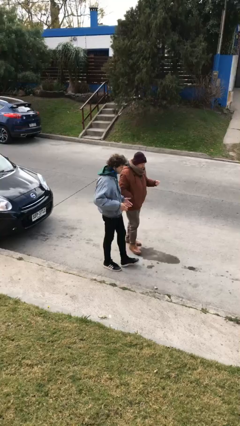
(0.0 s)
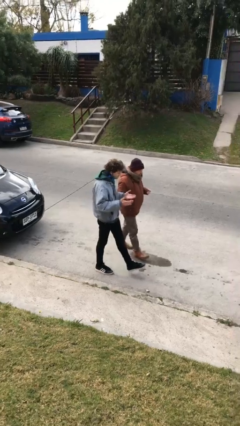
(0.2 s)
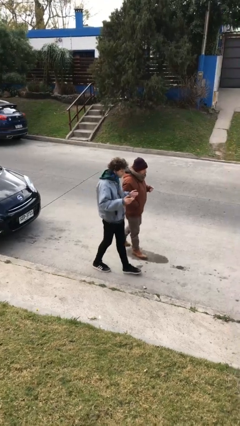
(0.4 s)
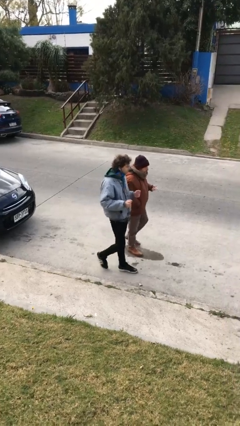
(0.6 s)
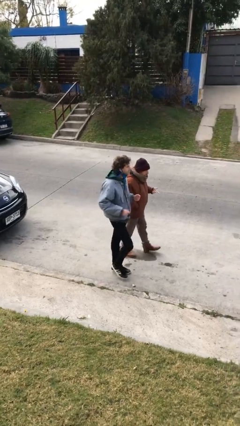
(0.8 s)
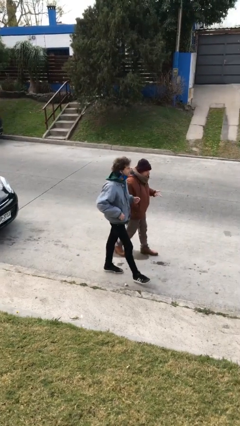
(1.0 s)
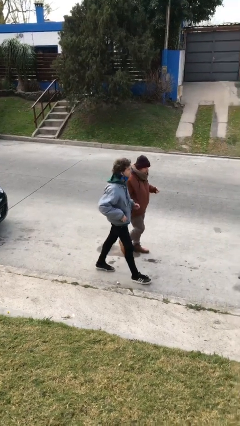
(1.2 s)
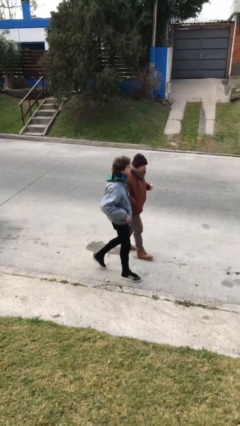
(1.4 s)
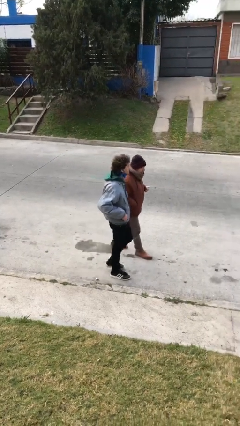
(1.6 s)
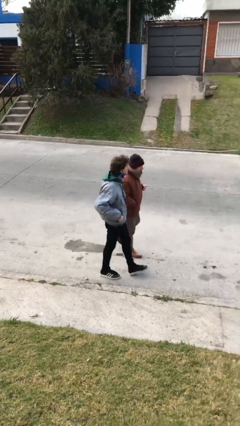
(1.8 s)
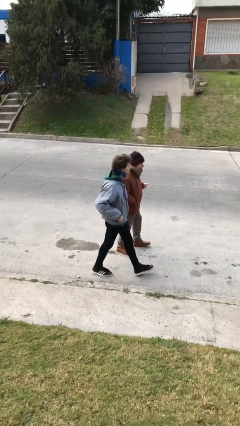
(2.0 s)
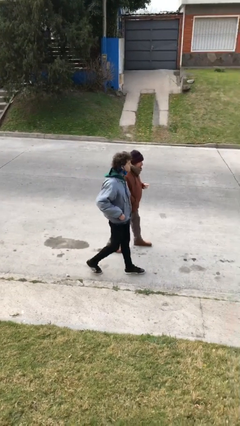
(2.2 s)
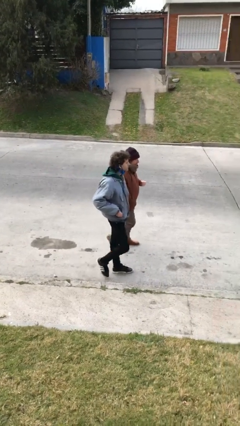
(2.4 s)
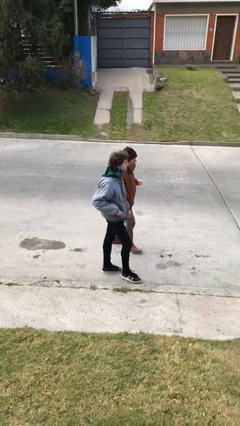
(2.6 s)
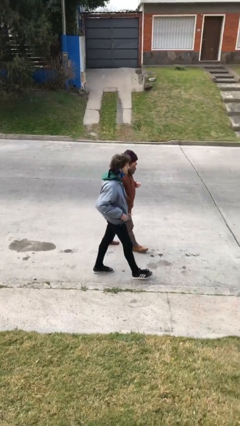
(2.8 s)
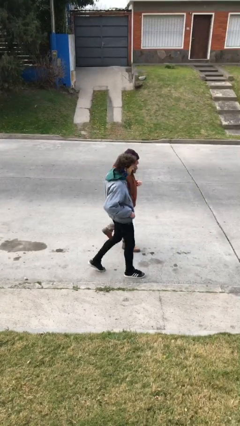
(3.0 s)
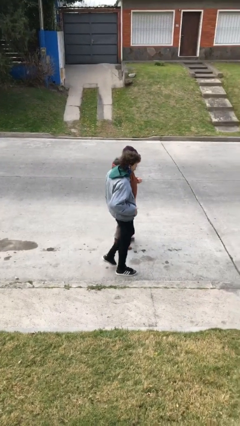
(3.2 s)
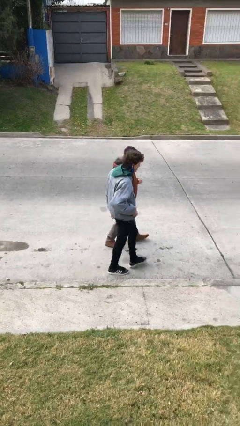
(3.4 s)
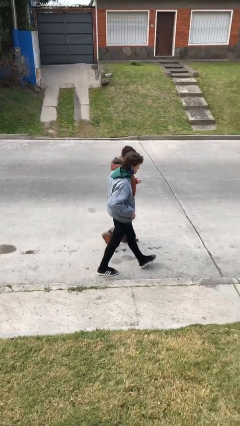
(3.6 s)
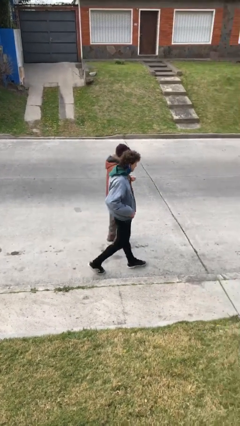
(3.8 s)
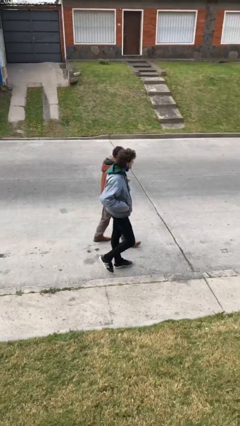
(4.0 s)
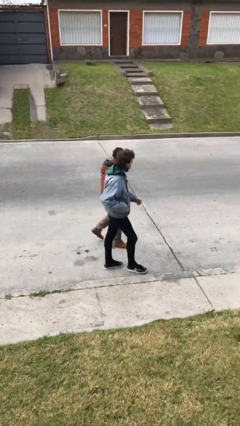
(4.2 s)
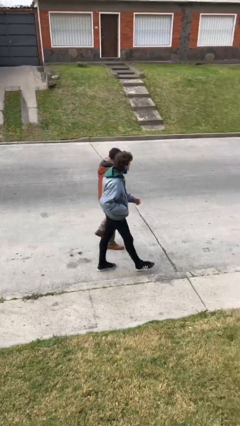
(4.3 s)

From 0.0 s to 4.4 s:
person talks to person

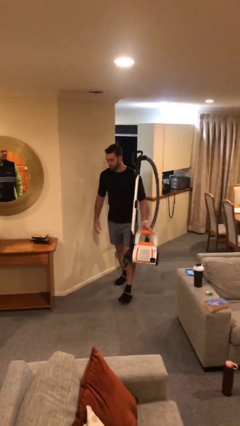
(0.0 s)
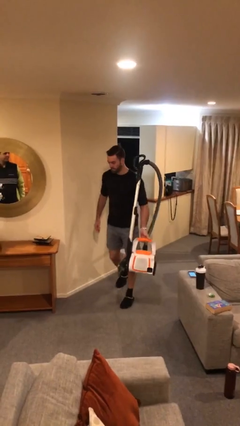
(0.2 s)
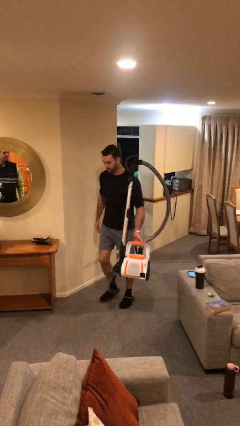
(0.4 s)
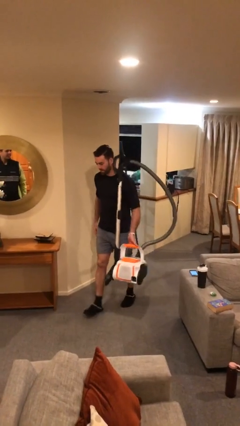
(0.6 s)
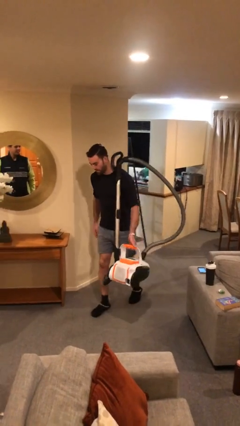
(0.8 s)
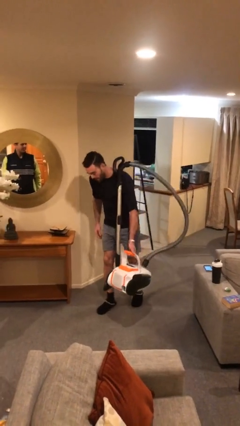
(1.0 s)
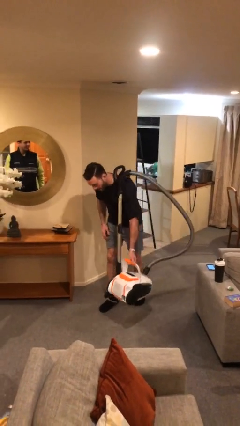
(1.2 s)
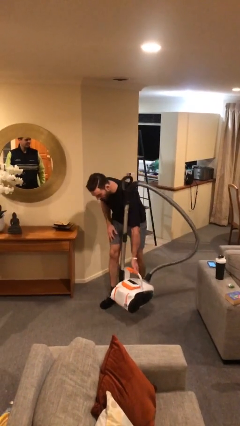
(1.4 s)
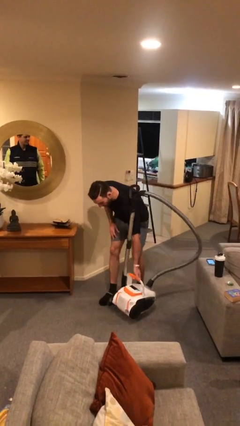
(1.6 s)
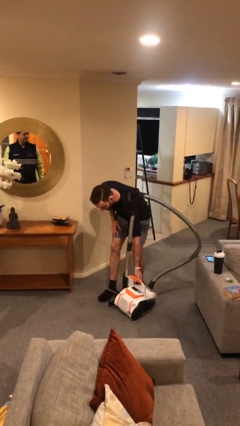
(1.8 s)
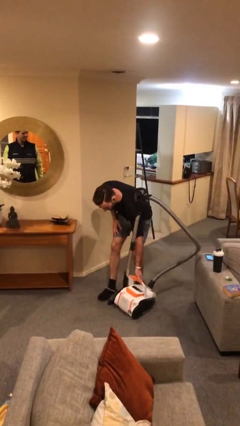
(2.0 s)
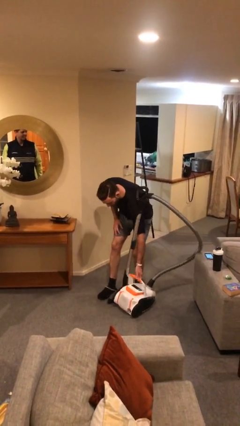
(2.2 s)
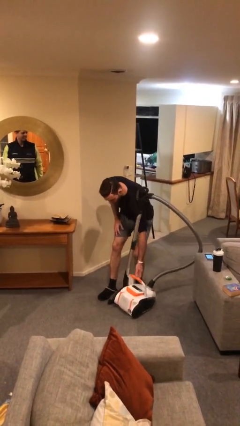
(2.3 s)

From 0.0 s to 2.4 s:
person puts down object on floor

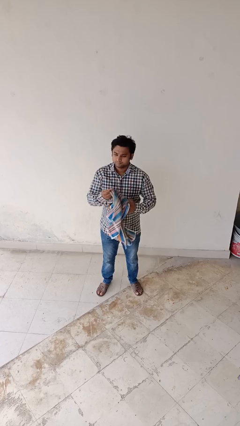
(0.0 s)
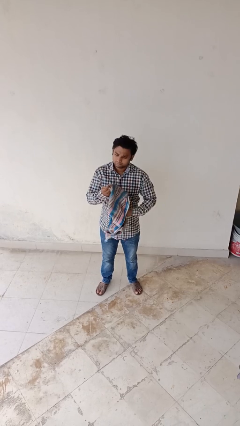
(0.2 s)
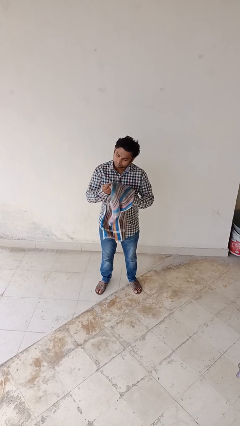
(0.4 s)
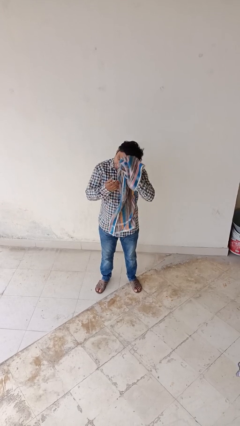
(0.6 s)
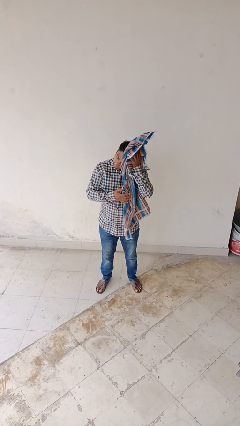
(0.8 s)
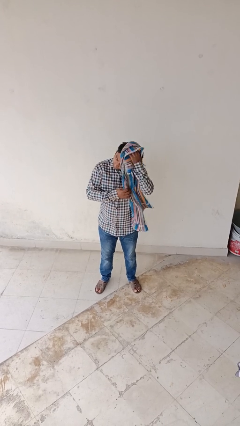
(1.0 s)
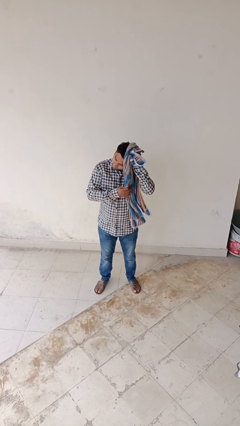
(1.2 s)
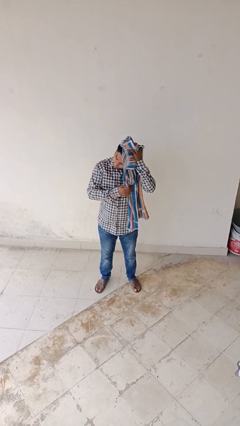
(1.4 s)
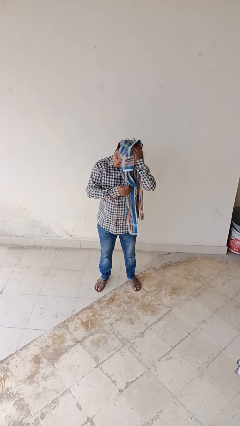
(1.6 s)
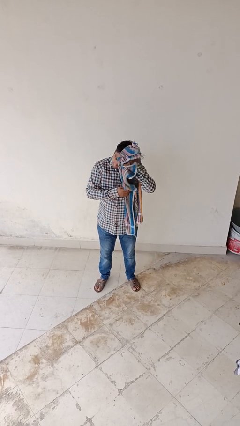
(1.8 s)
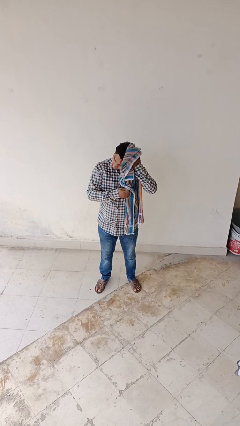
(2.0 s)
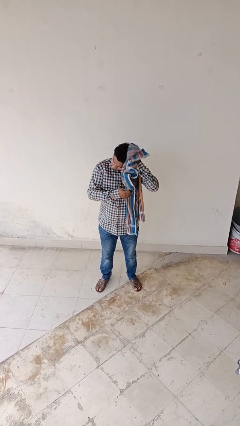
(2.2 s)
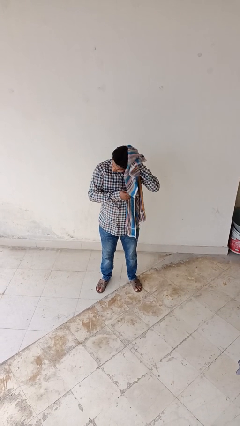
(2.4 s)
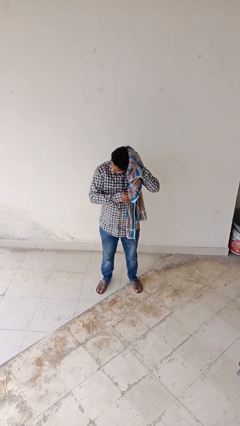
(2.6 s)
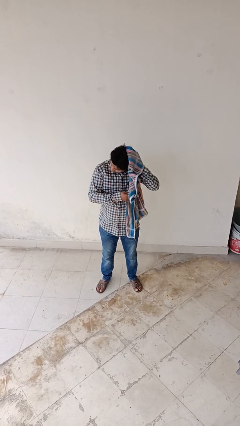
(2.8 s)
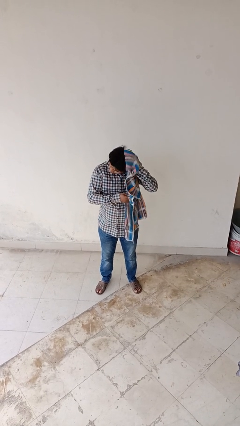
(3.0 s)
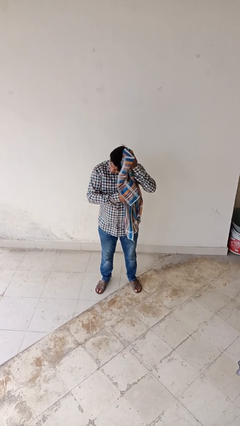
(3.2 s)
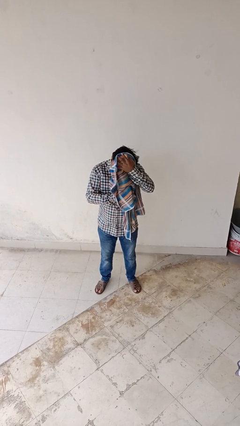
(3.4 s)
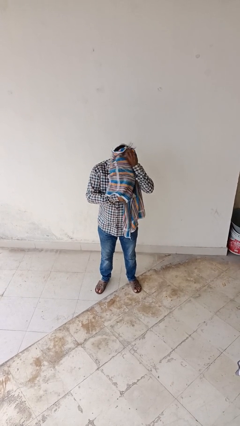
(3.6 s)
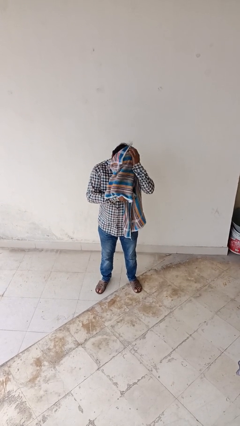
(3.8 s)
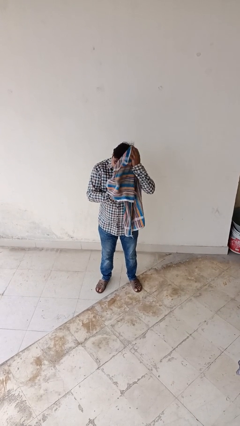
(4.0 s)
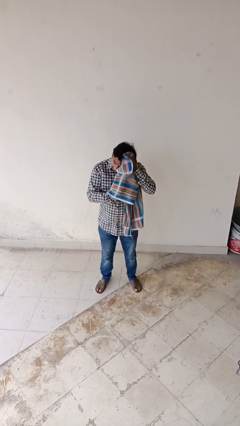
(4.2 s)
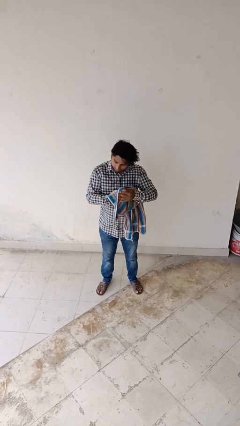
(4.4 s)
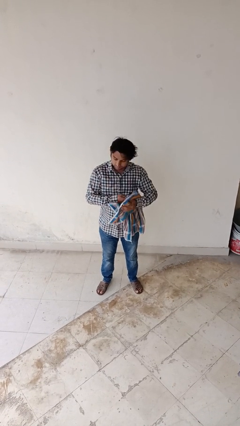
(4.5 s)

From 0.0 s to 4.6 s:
person dries hair with towel

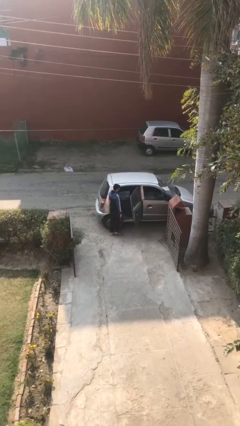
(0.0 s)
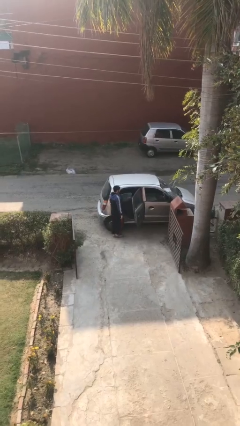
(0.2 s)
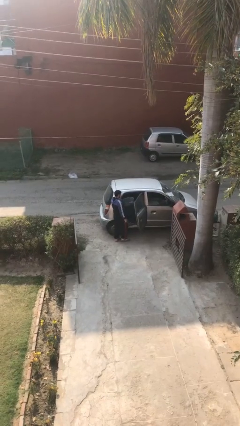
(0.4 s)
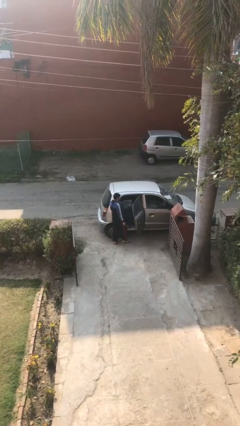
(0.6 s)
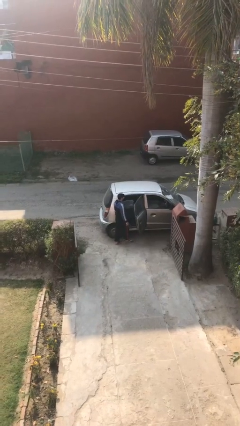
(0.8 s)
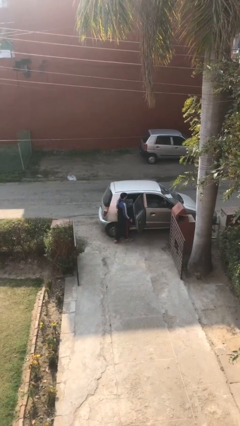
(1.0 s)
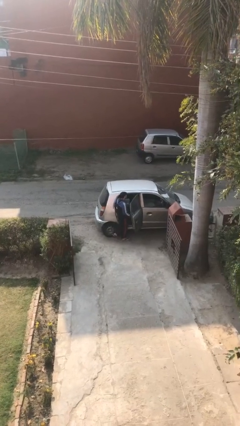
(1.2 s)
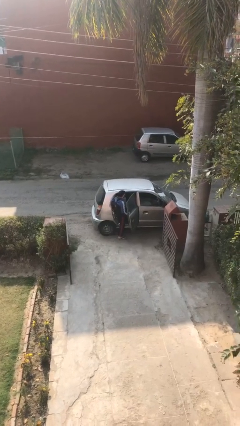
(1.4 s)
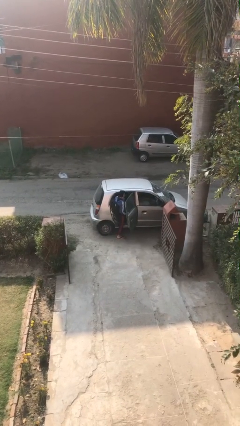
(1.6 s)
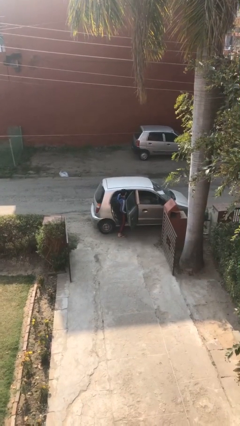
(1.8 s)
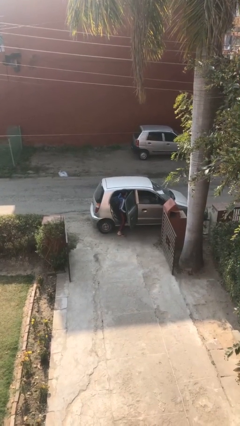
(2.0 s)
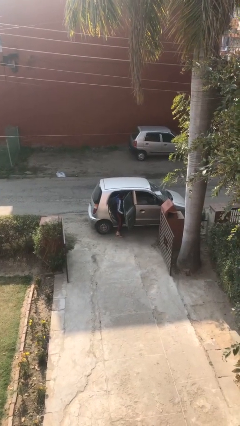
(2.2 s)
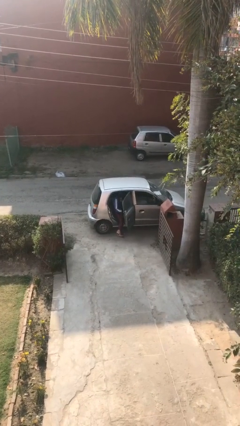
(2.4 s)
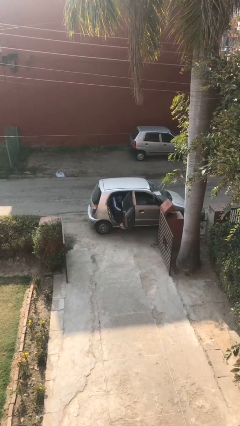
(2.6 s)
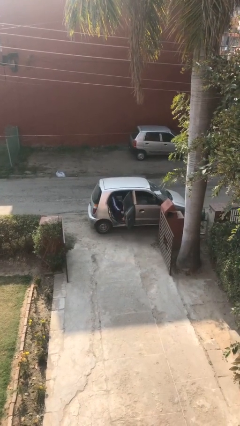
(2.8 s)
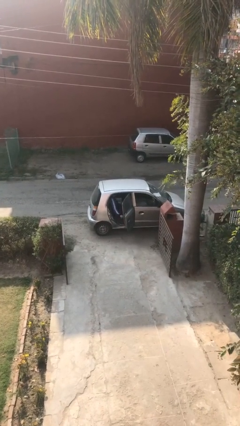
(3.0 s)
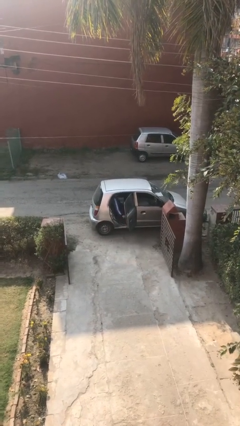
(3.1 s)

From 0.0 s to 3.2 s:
person enters car

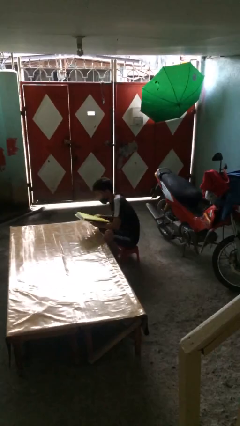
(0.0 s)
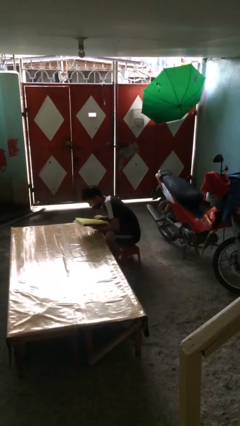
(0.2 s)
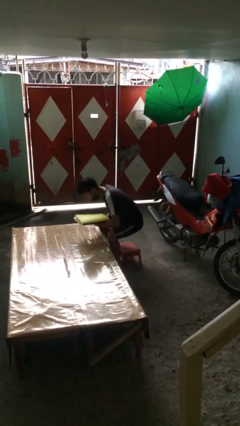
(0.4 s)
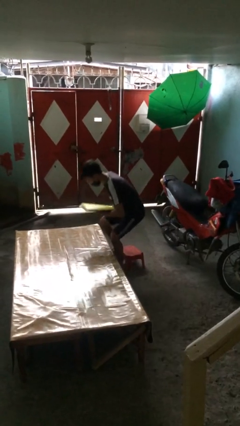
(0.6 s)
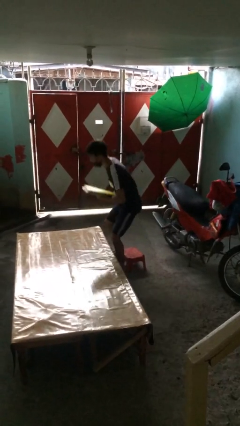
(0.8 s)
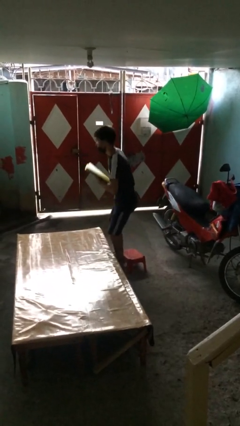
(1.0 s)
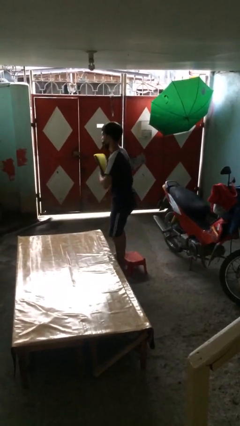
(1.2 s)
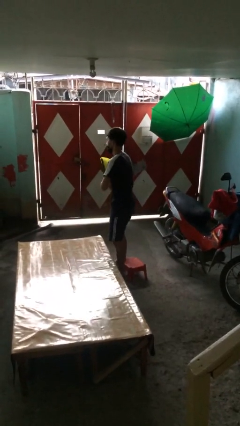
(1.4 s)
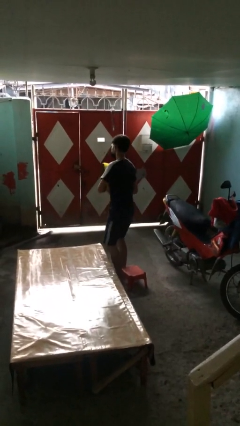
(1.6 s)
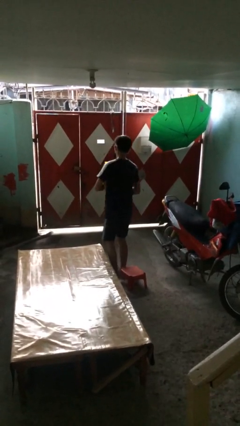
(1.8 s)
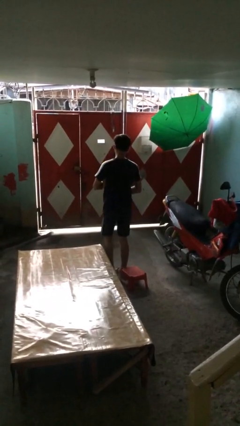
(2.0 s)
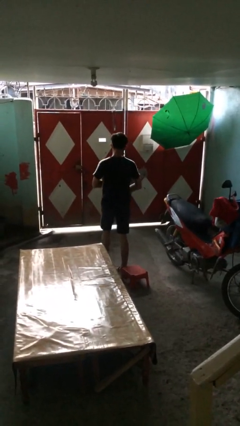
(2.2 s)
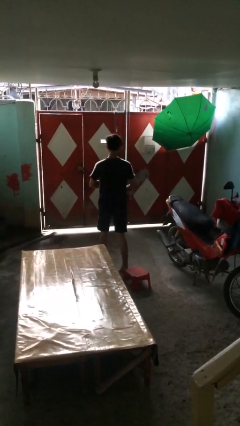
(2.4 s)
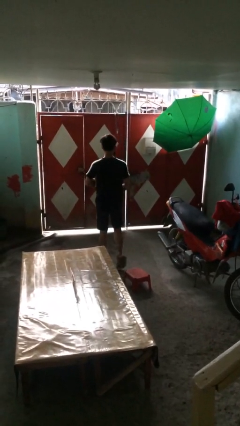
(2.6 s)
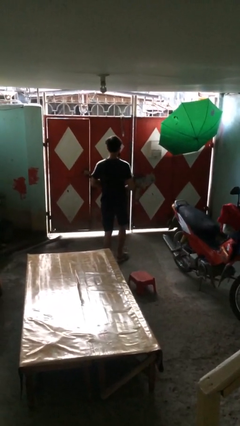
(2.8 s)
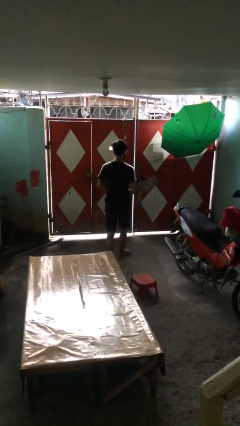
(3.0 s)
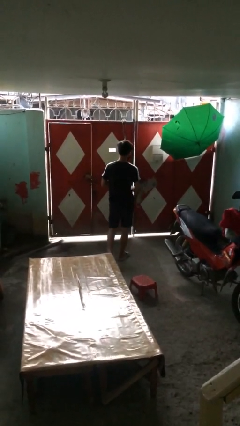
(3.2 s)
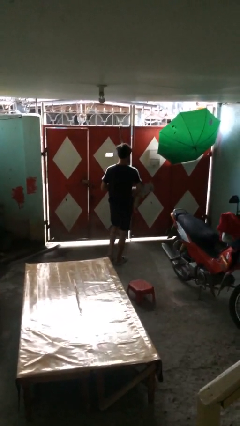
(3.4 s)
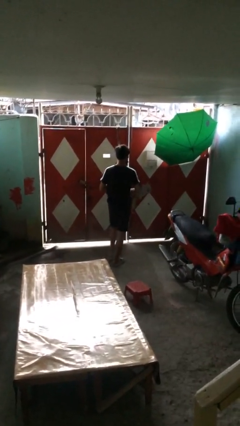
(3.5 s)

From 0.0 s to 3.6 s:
person stands up
